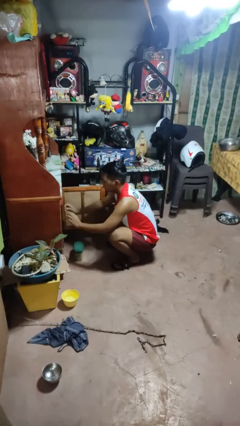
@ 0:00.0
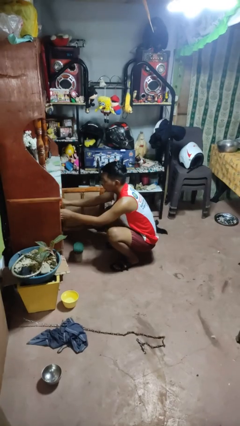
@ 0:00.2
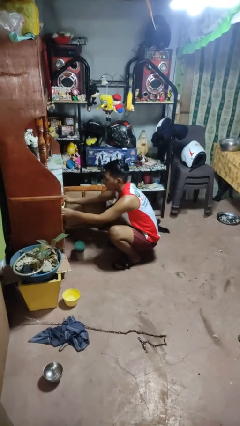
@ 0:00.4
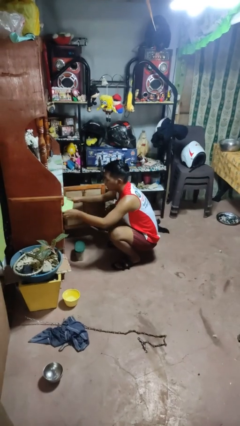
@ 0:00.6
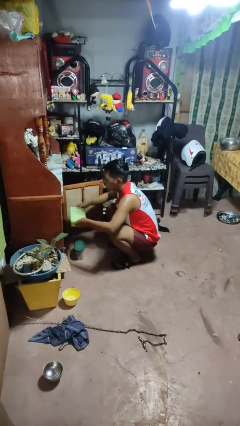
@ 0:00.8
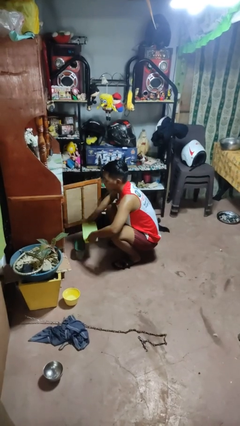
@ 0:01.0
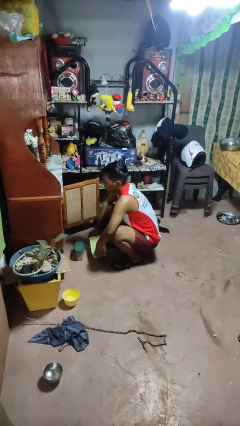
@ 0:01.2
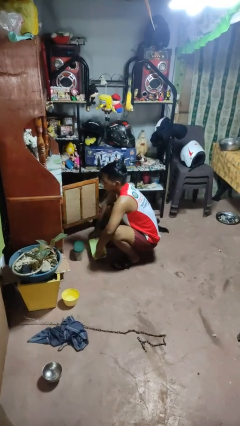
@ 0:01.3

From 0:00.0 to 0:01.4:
person takes object from cabinet

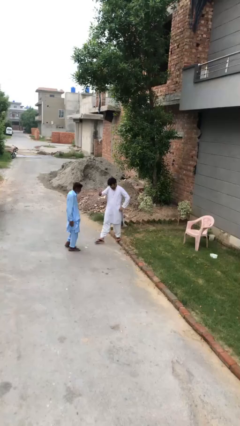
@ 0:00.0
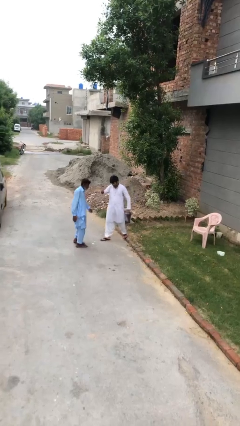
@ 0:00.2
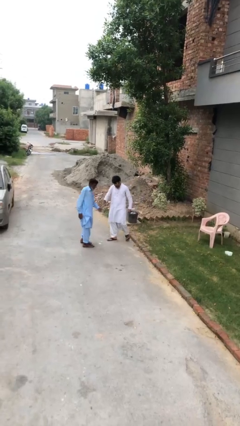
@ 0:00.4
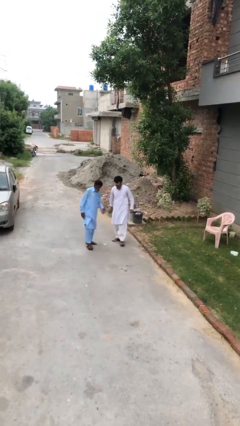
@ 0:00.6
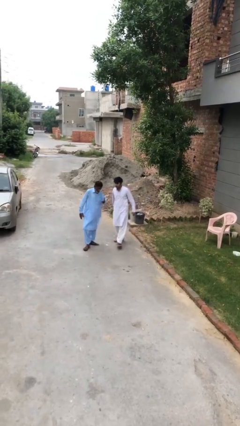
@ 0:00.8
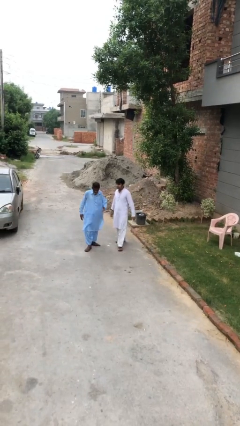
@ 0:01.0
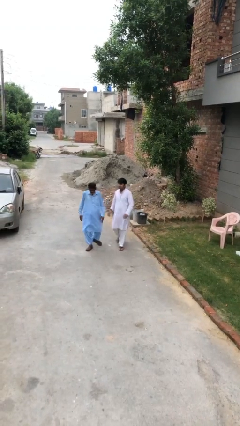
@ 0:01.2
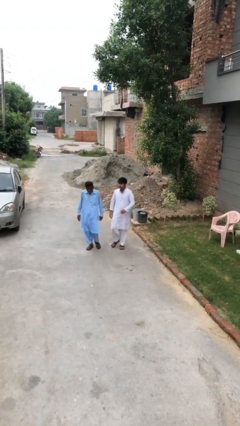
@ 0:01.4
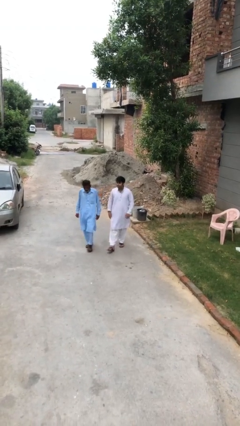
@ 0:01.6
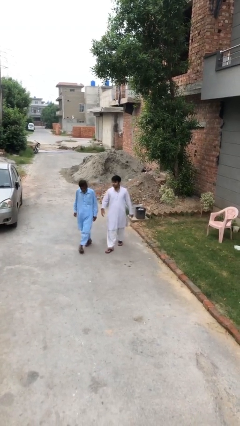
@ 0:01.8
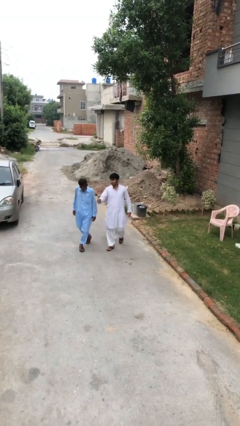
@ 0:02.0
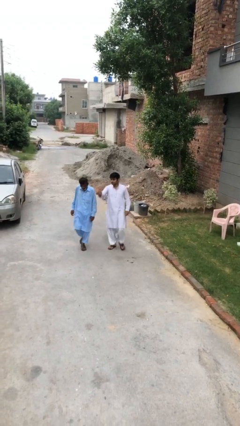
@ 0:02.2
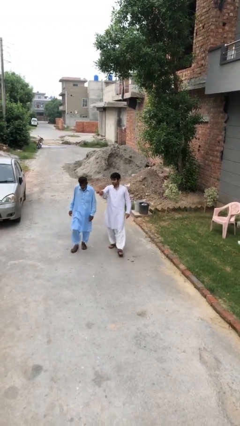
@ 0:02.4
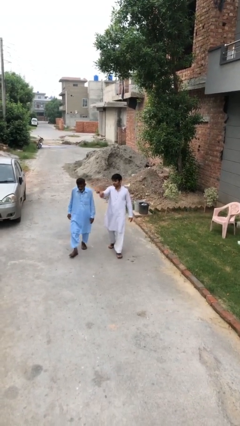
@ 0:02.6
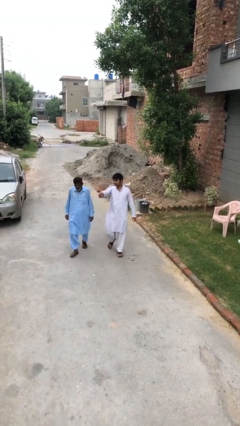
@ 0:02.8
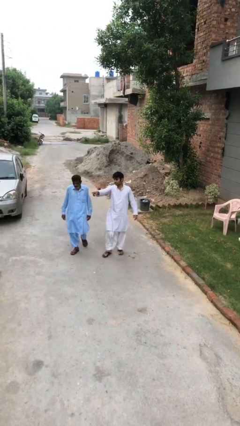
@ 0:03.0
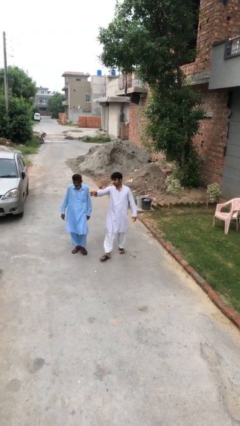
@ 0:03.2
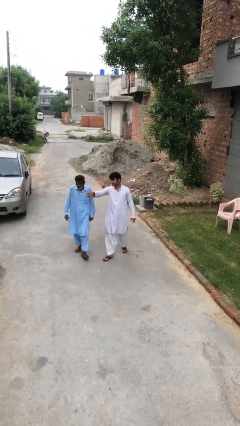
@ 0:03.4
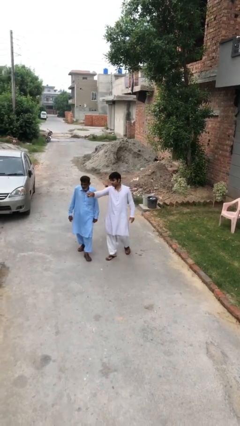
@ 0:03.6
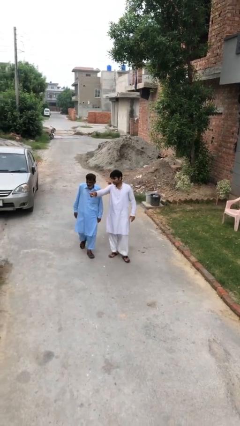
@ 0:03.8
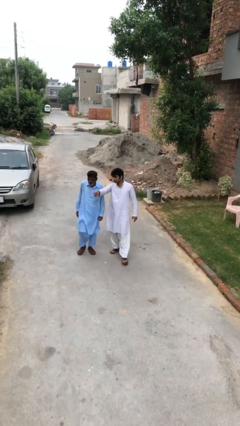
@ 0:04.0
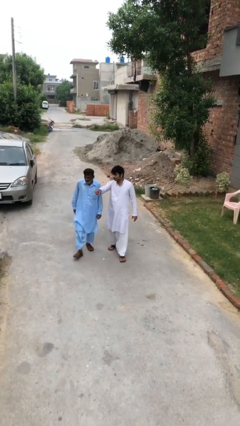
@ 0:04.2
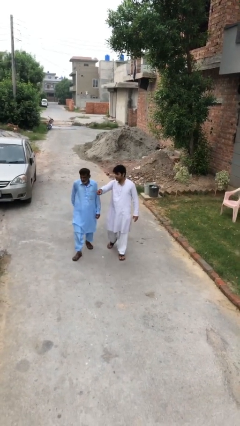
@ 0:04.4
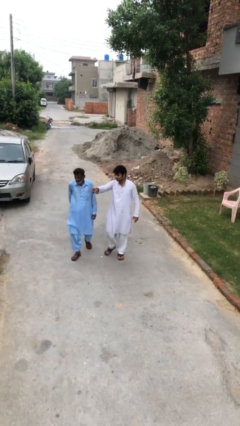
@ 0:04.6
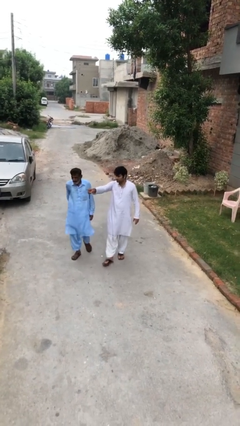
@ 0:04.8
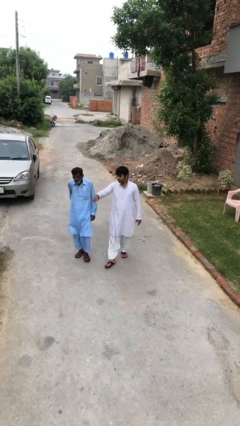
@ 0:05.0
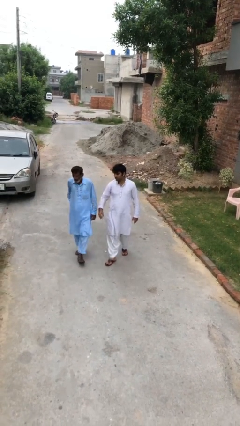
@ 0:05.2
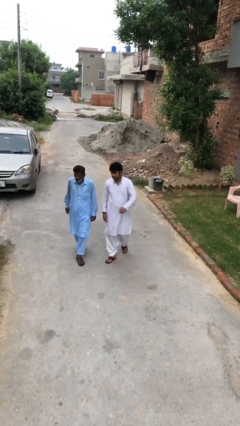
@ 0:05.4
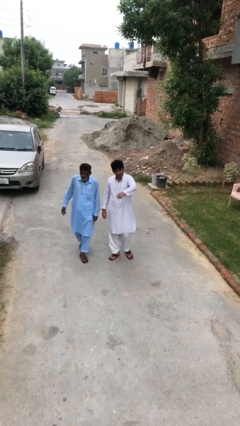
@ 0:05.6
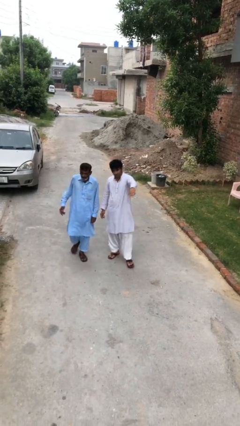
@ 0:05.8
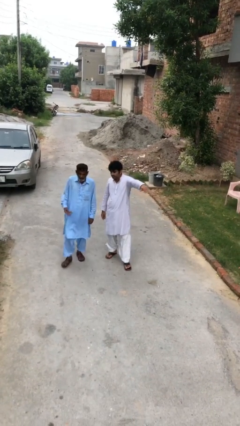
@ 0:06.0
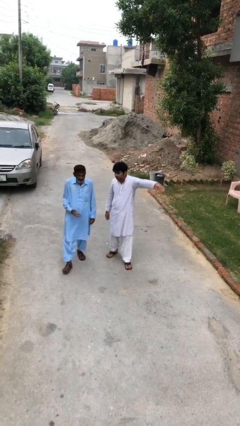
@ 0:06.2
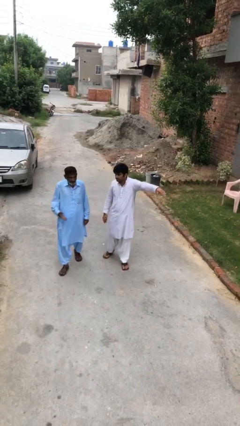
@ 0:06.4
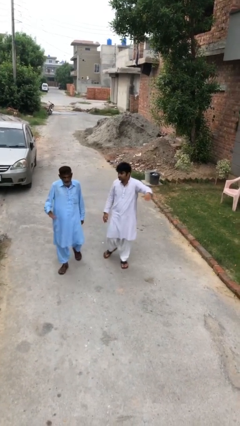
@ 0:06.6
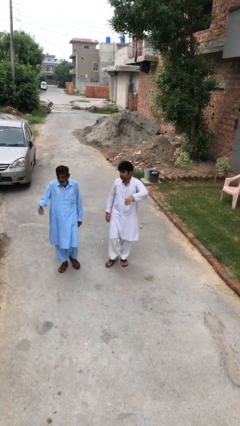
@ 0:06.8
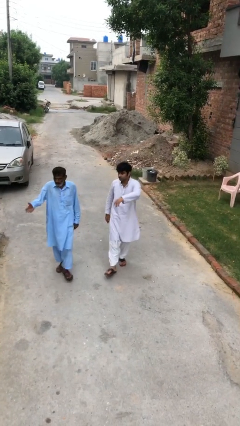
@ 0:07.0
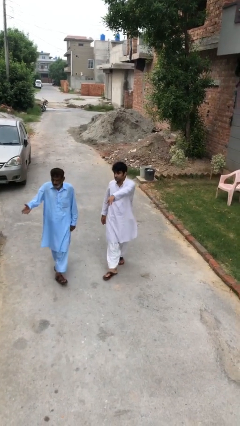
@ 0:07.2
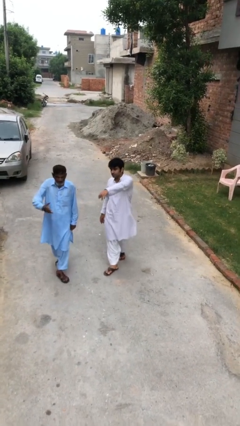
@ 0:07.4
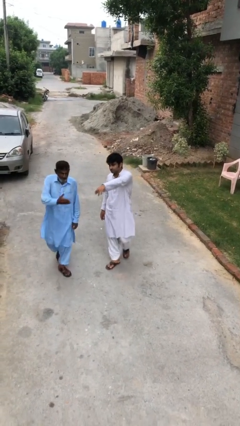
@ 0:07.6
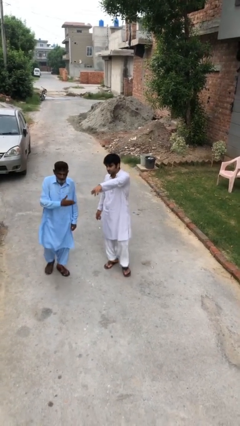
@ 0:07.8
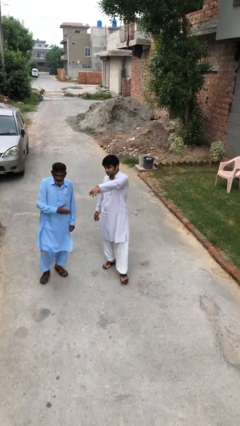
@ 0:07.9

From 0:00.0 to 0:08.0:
person talks to person

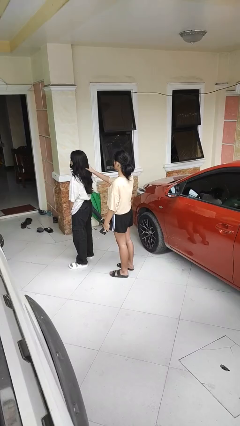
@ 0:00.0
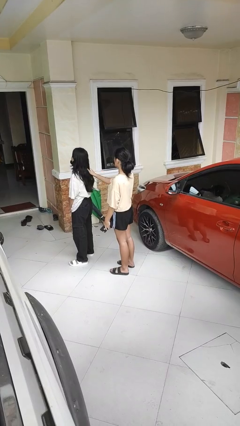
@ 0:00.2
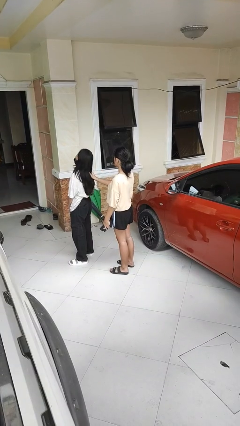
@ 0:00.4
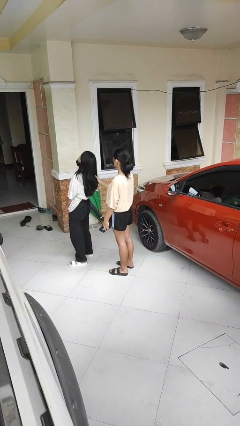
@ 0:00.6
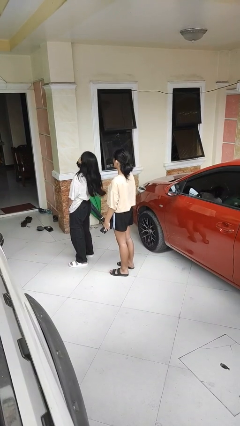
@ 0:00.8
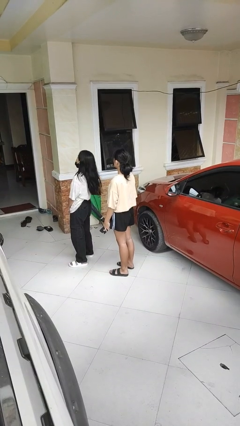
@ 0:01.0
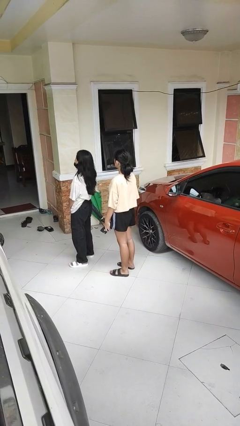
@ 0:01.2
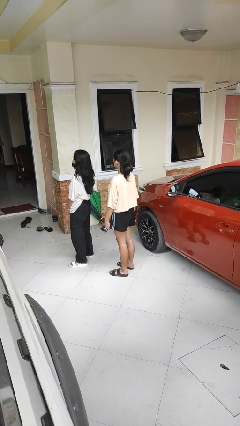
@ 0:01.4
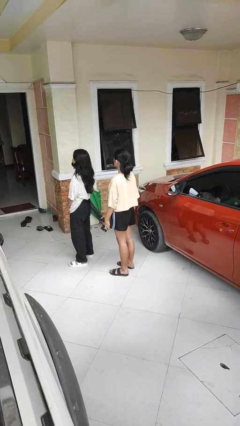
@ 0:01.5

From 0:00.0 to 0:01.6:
person grabs person by hair

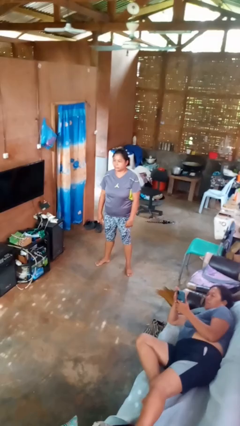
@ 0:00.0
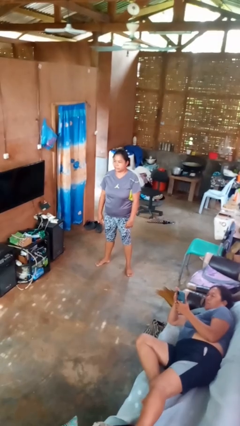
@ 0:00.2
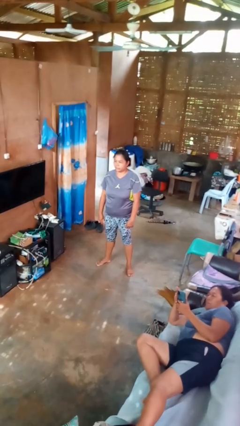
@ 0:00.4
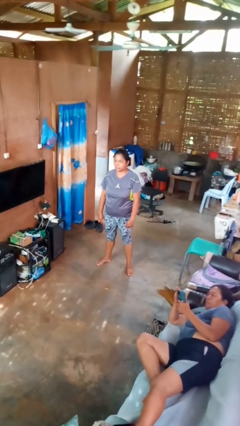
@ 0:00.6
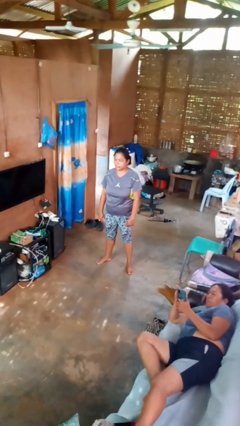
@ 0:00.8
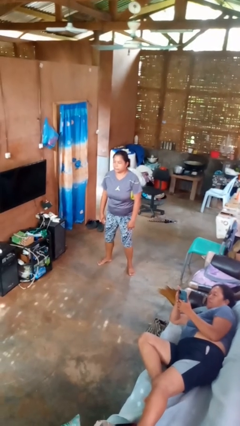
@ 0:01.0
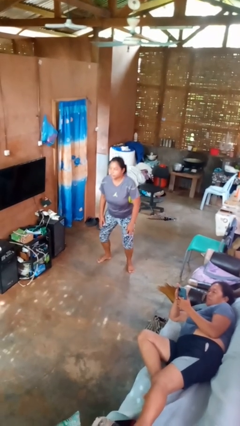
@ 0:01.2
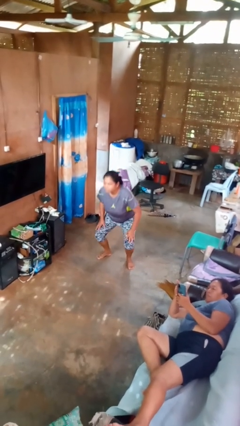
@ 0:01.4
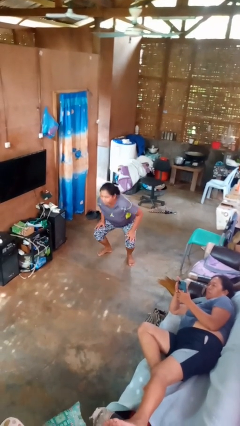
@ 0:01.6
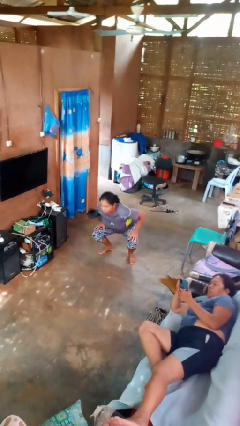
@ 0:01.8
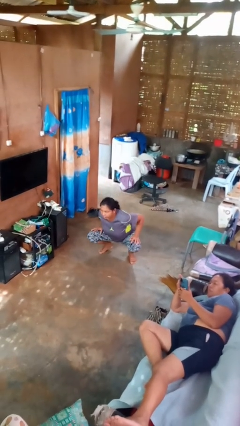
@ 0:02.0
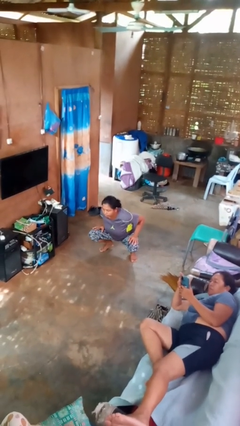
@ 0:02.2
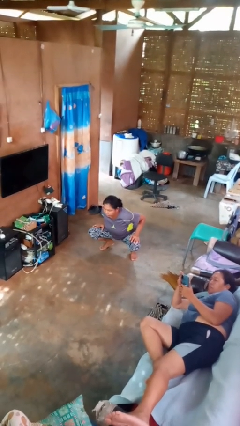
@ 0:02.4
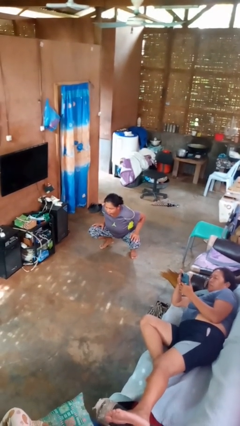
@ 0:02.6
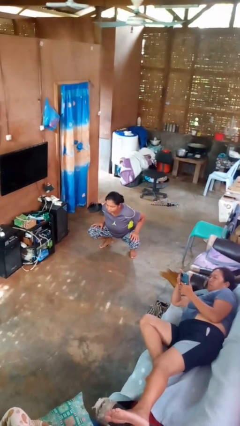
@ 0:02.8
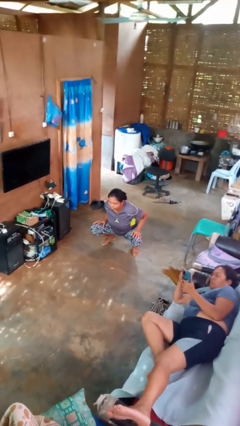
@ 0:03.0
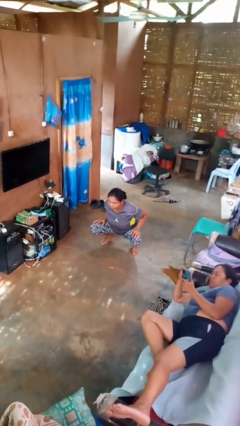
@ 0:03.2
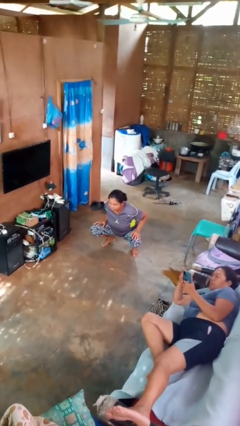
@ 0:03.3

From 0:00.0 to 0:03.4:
person squats

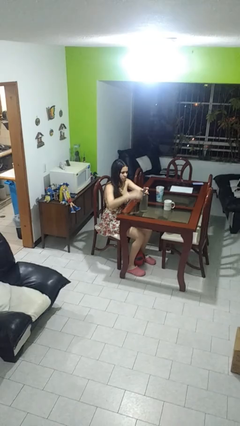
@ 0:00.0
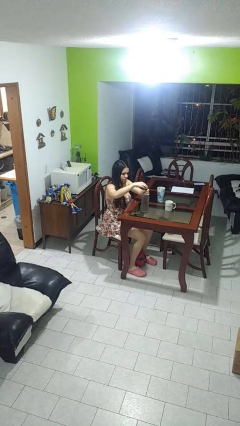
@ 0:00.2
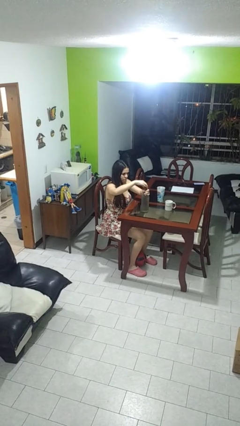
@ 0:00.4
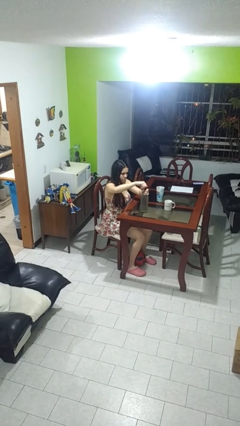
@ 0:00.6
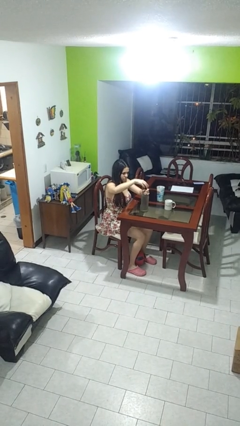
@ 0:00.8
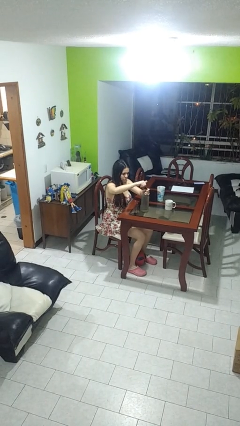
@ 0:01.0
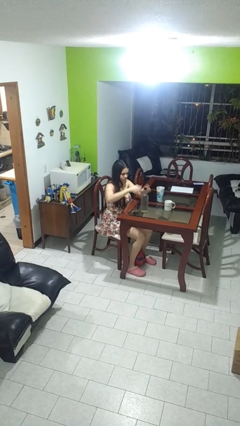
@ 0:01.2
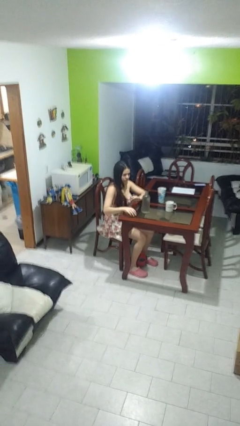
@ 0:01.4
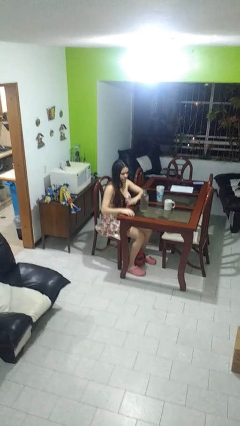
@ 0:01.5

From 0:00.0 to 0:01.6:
person screws lid to bottle

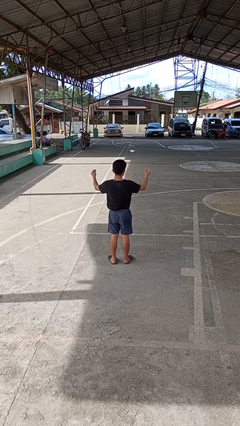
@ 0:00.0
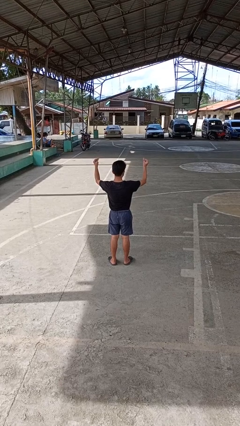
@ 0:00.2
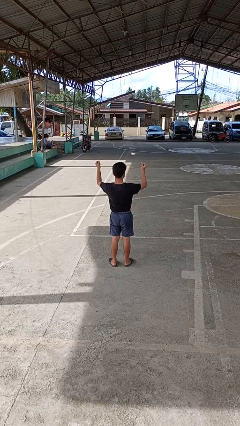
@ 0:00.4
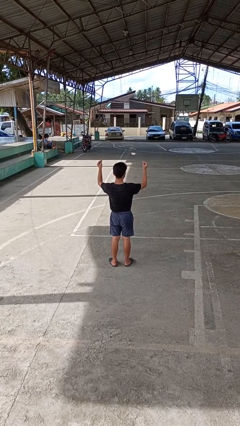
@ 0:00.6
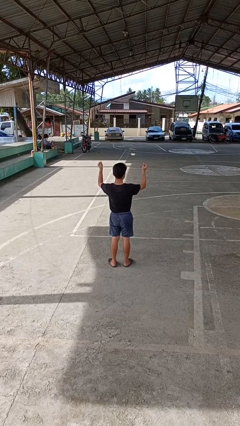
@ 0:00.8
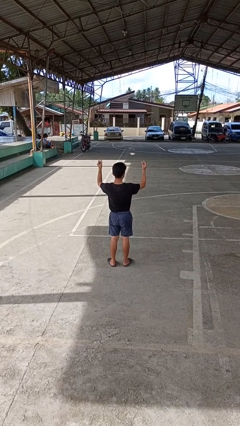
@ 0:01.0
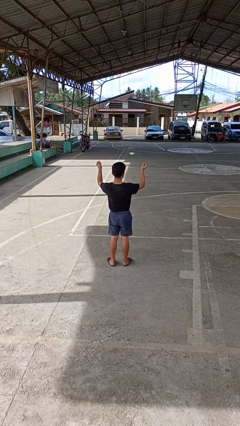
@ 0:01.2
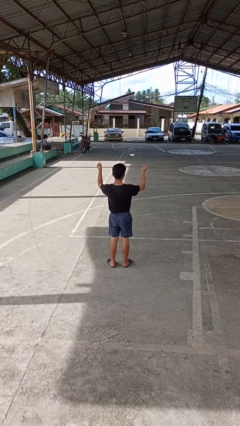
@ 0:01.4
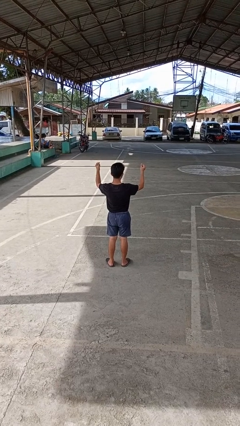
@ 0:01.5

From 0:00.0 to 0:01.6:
person snaps fingers
